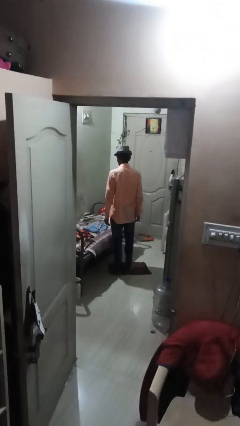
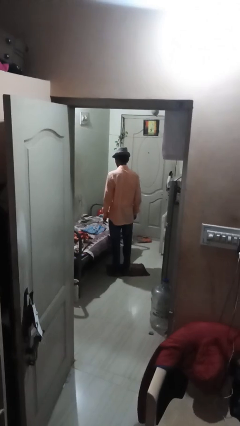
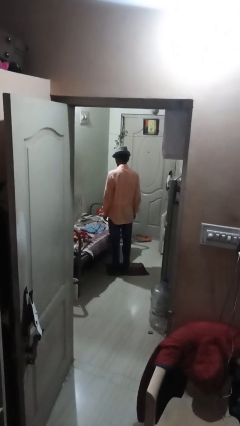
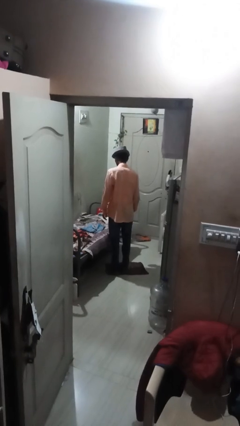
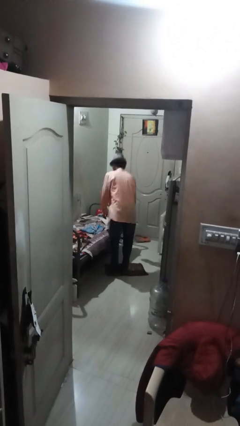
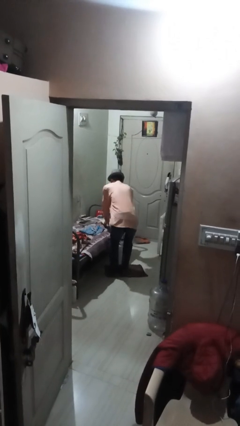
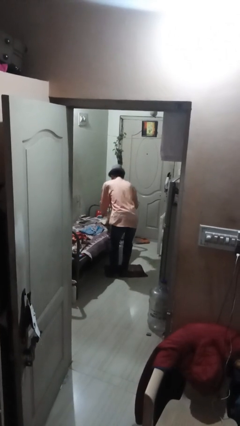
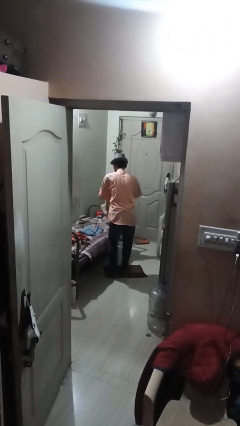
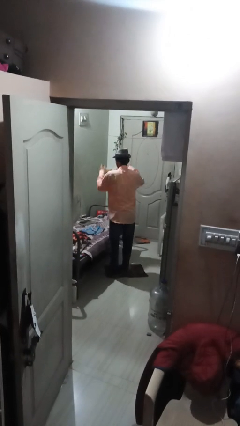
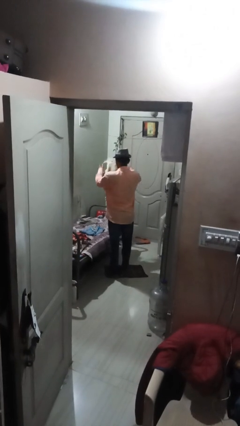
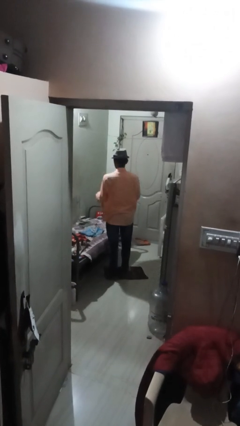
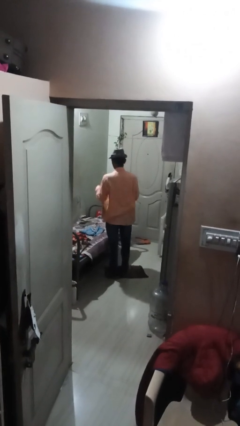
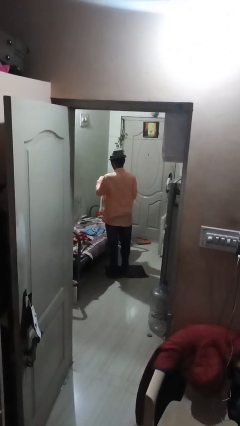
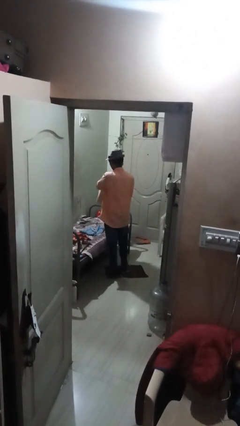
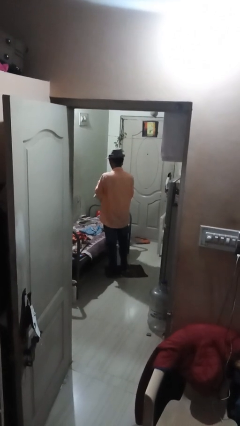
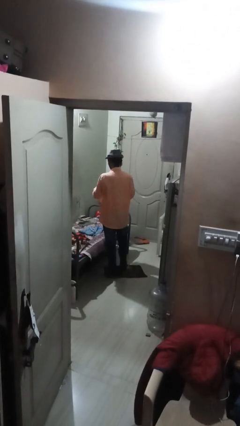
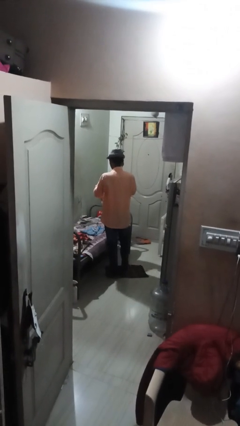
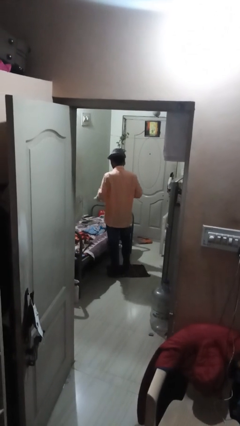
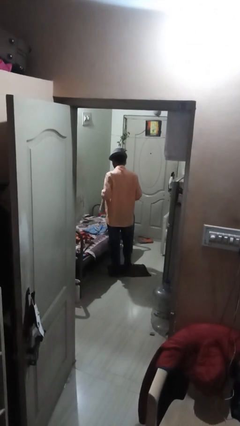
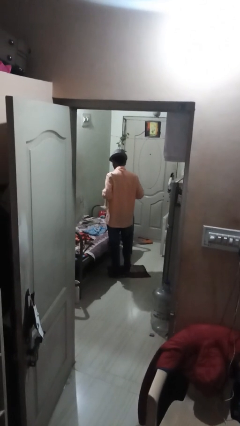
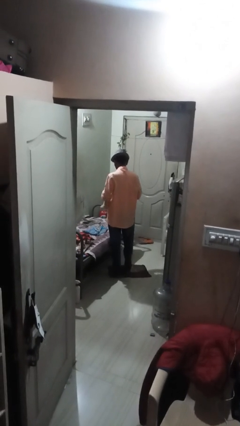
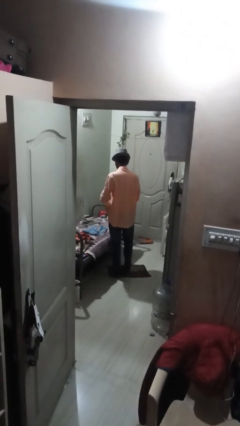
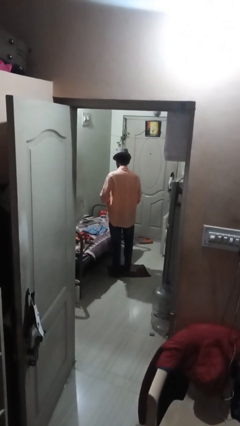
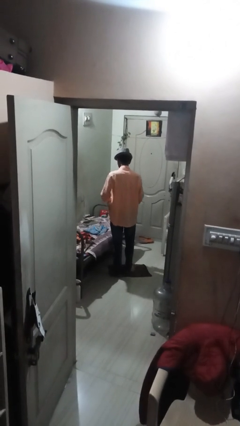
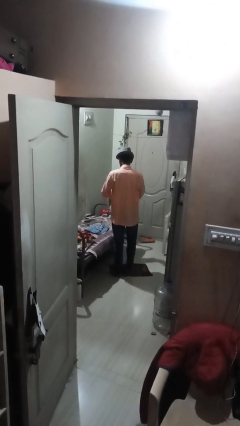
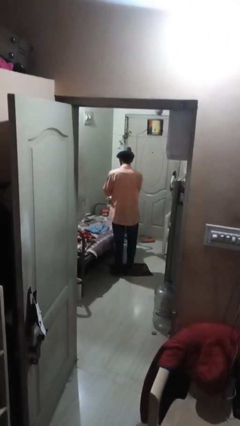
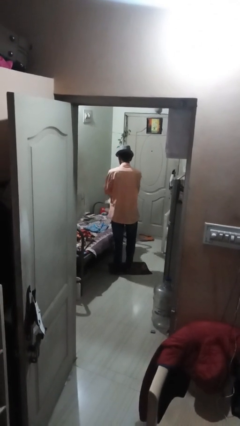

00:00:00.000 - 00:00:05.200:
person folds towel

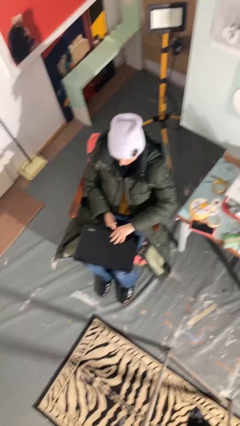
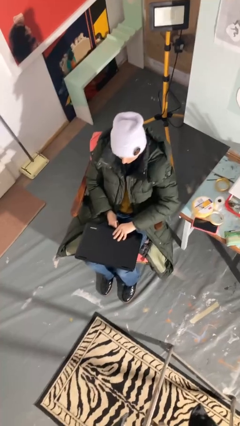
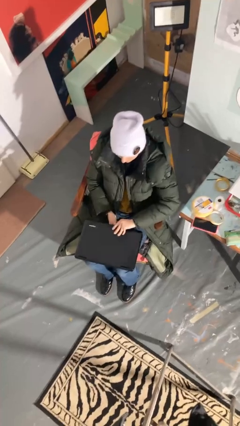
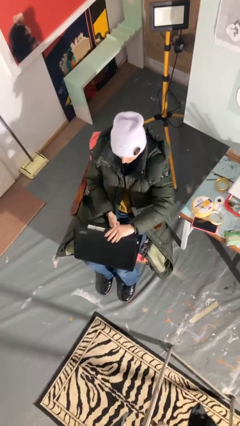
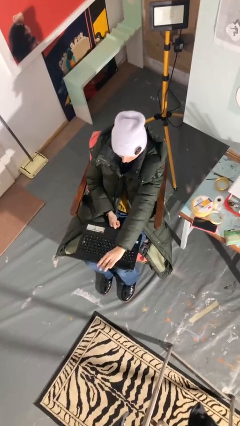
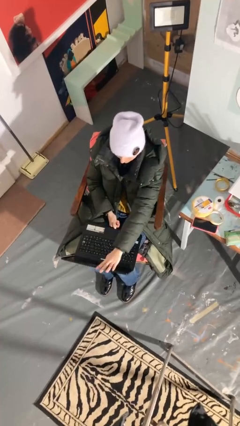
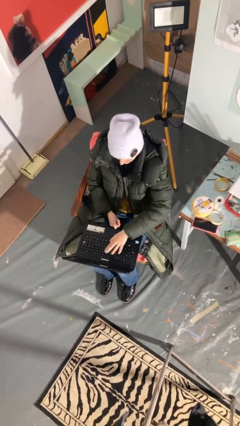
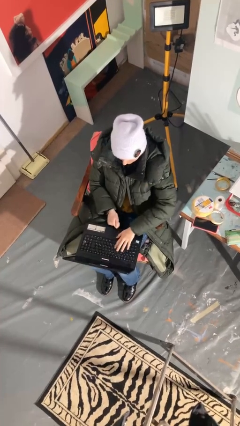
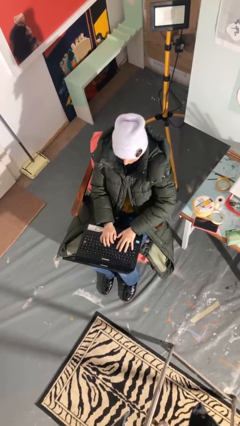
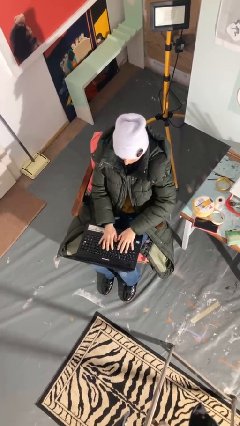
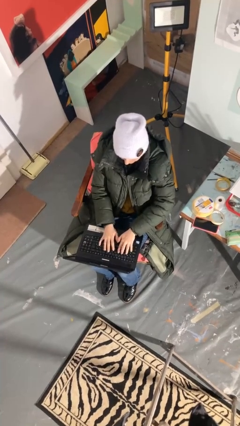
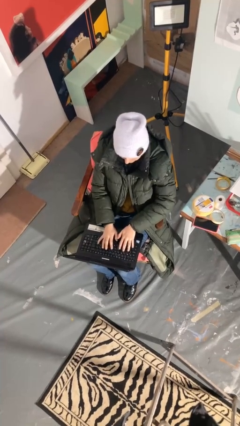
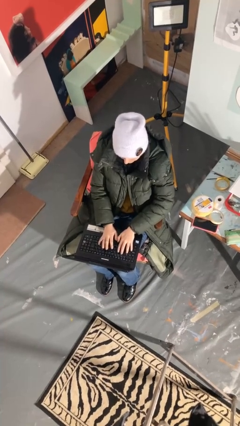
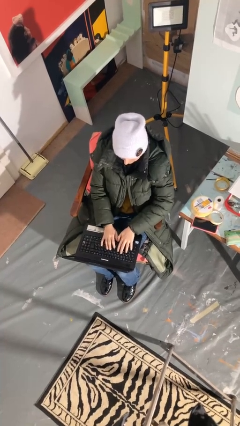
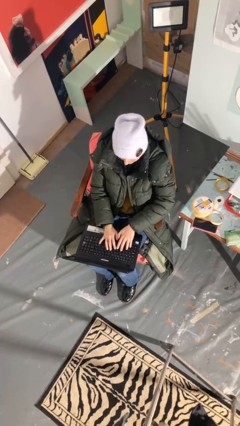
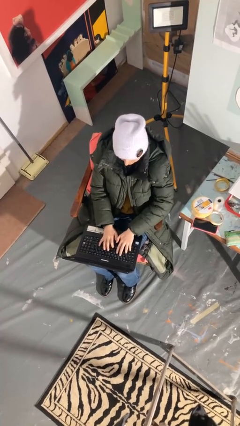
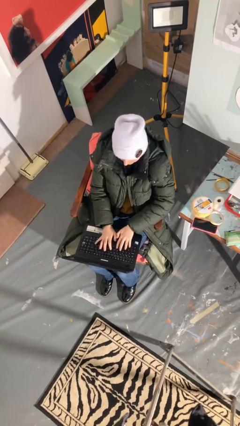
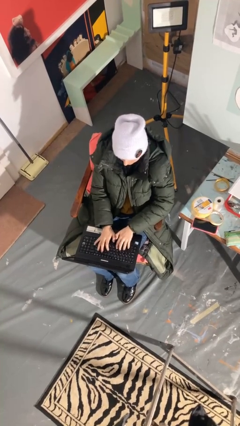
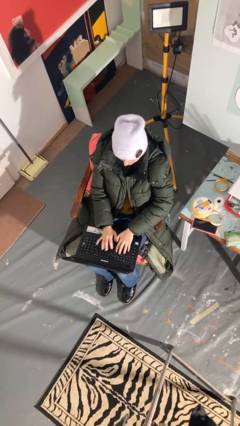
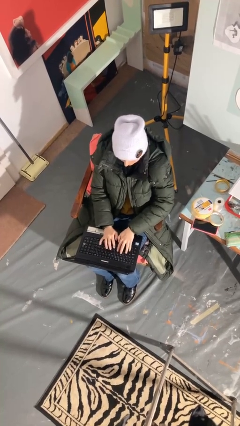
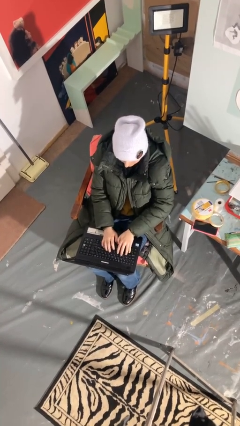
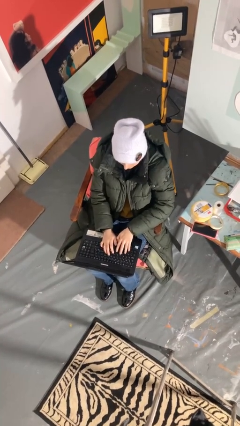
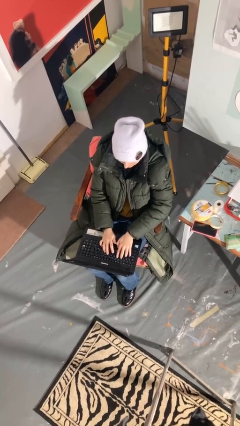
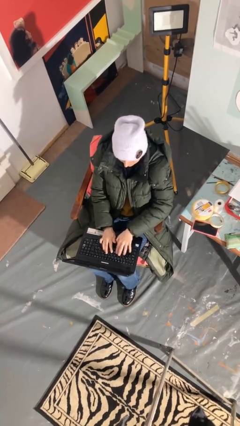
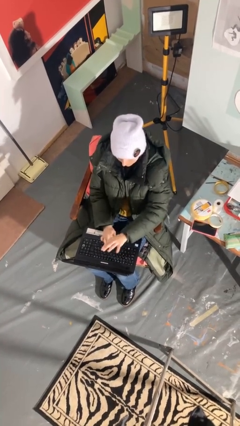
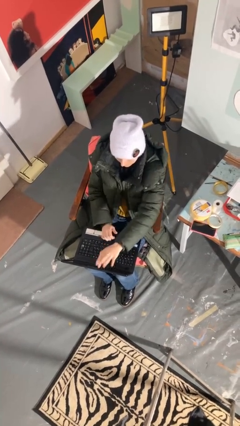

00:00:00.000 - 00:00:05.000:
person interacts with laptop

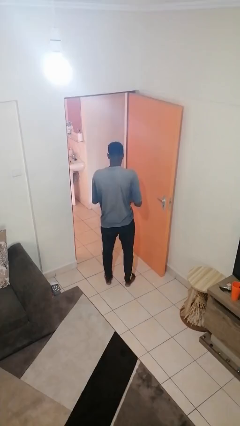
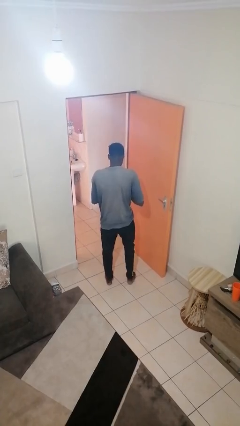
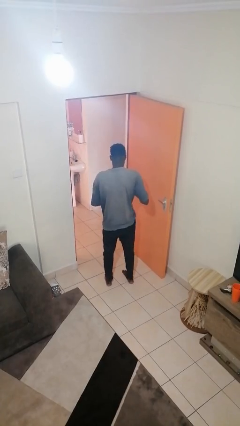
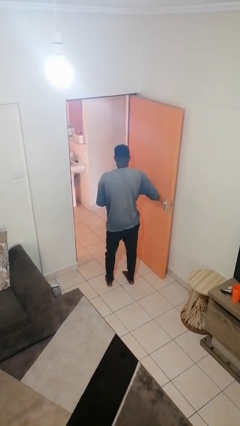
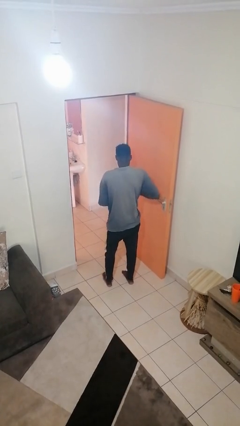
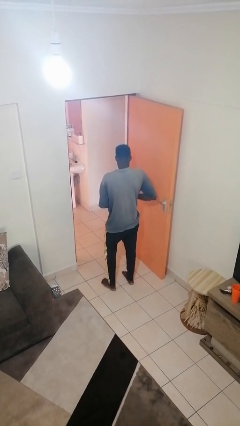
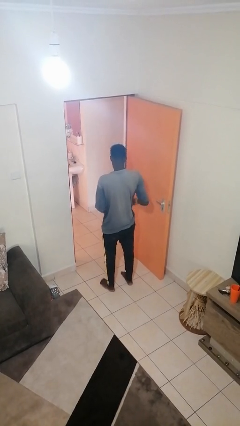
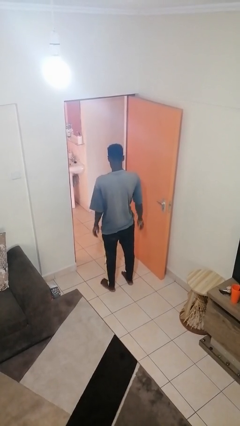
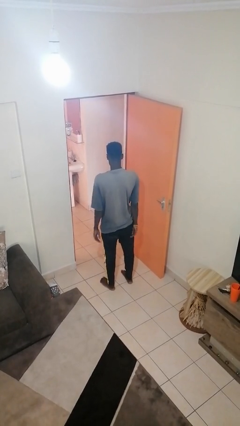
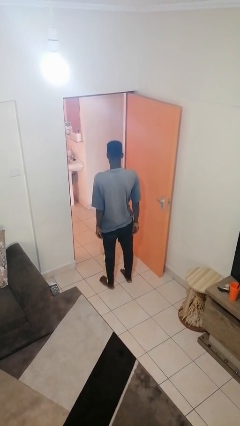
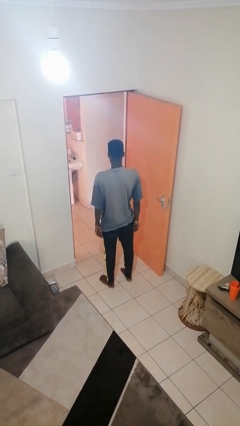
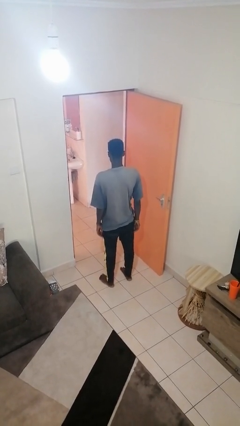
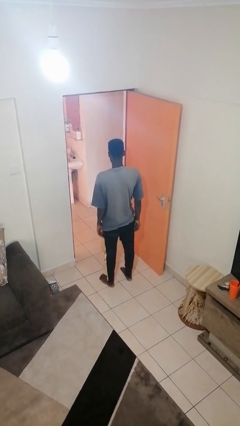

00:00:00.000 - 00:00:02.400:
person puts phone into pocket

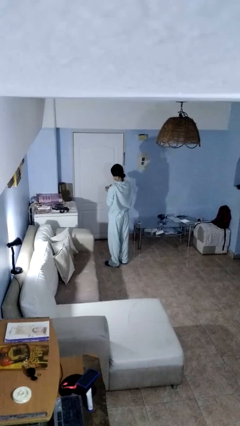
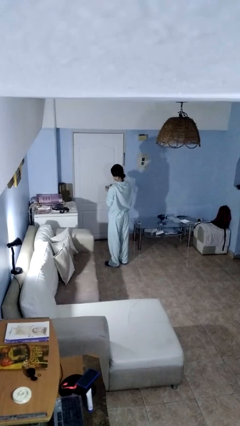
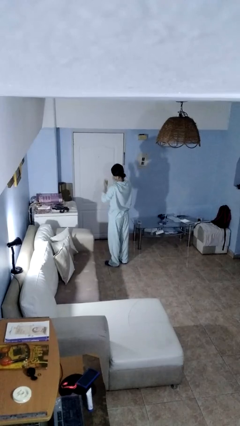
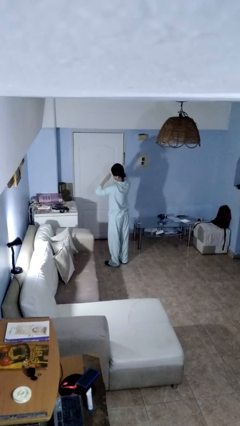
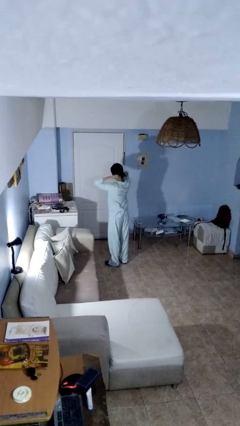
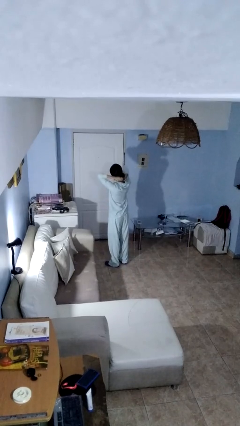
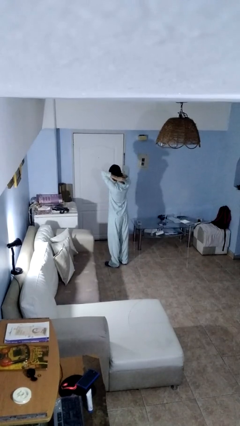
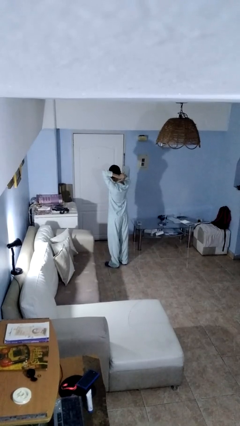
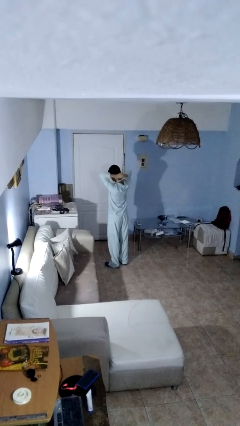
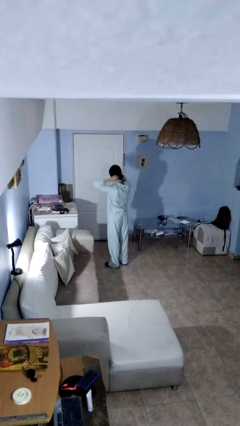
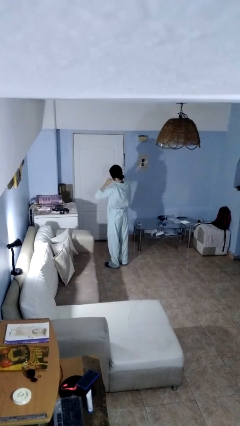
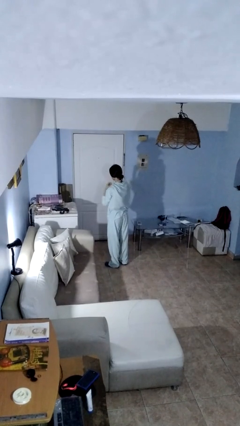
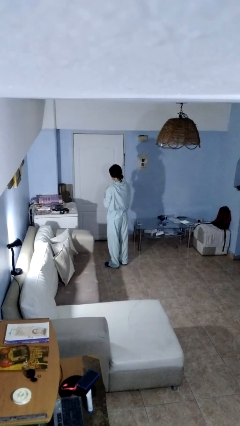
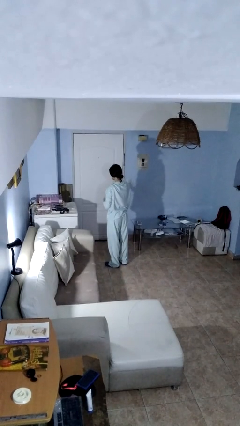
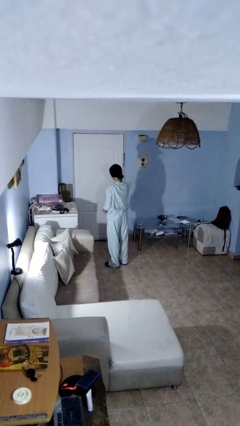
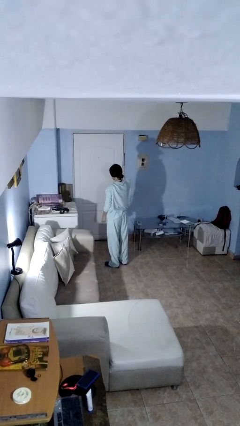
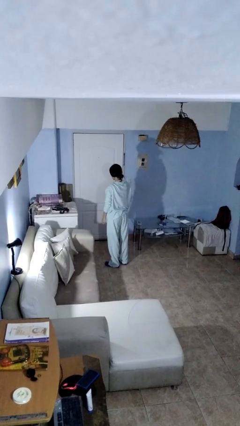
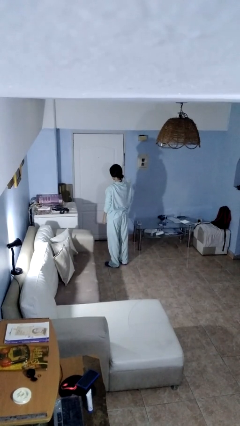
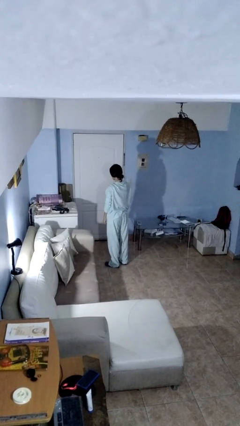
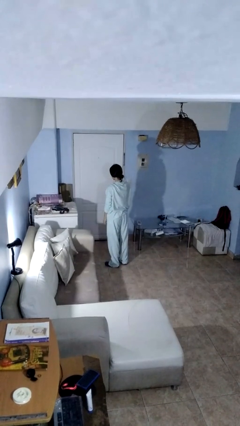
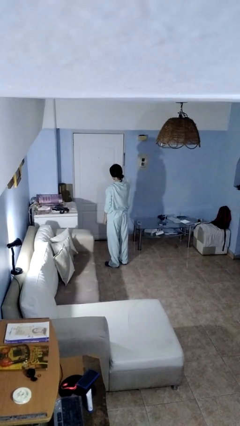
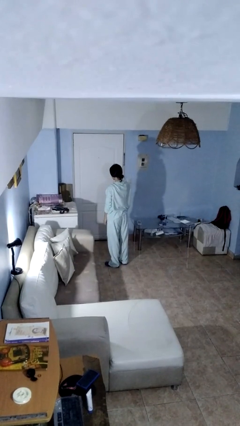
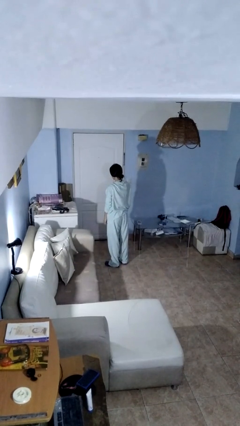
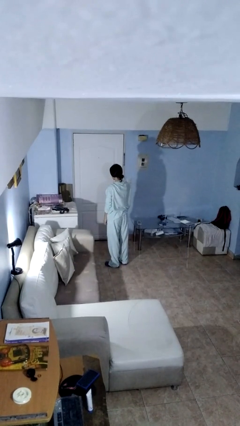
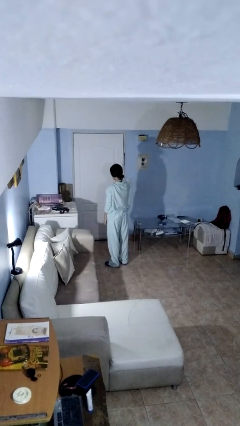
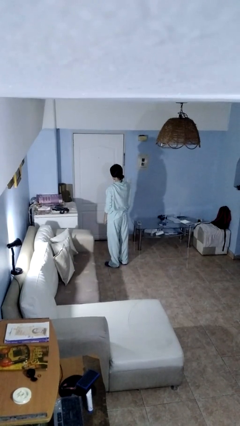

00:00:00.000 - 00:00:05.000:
person puts on necklace
